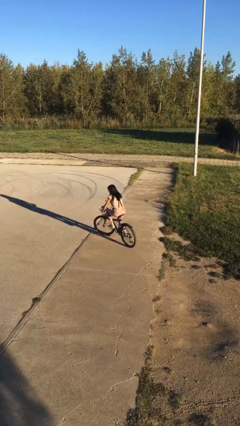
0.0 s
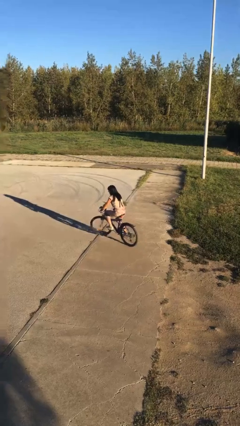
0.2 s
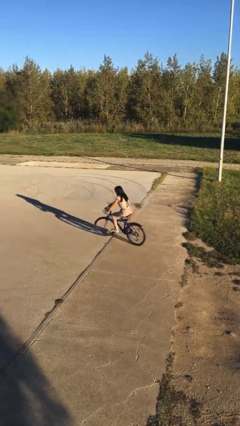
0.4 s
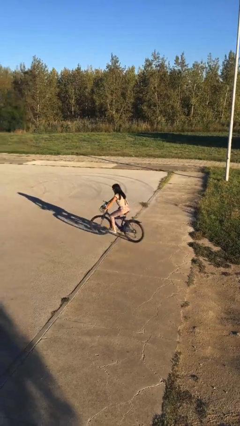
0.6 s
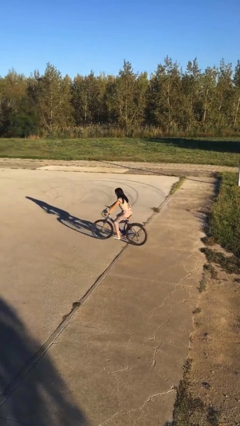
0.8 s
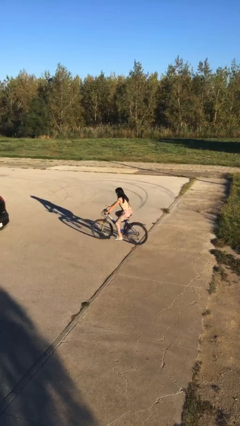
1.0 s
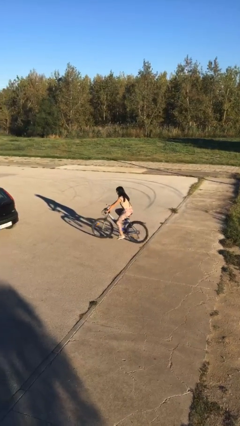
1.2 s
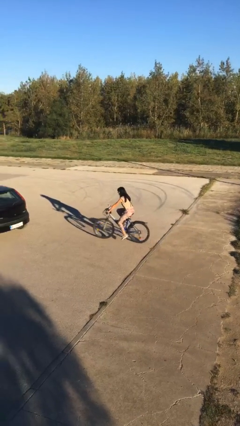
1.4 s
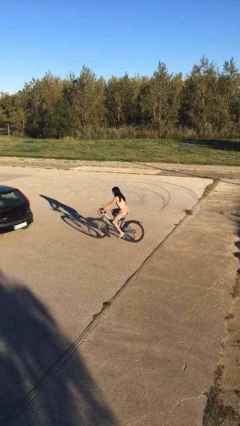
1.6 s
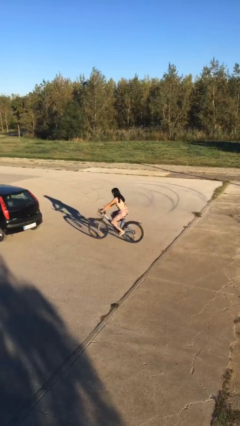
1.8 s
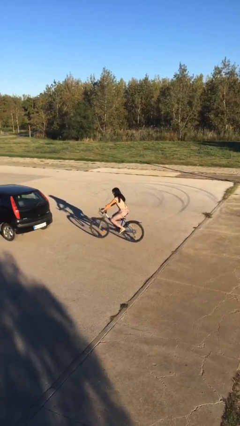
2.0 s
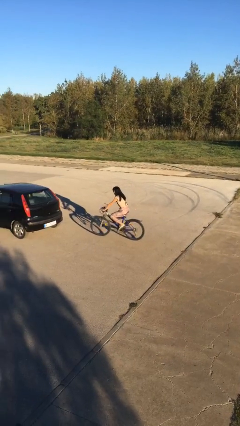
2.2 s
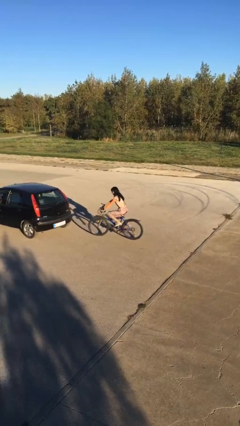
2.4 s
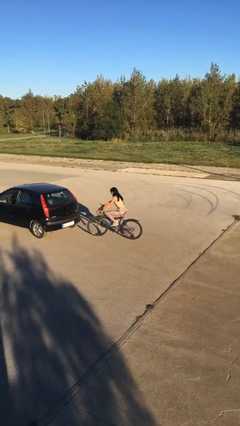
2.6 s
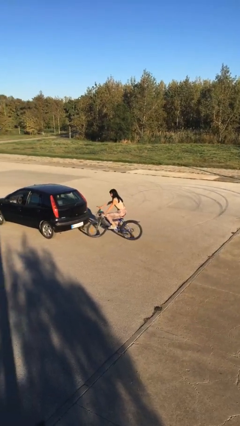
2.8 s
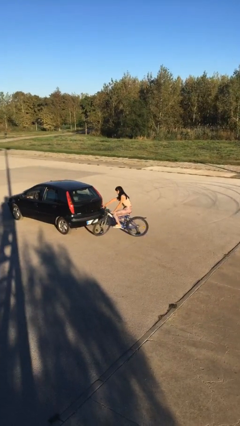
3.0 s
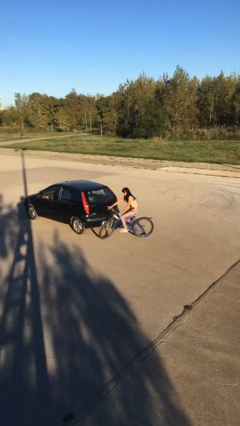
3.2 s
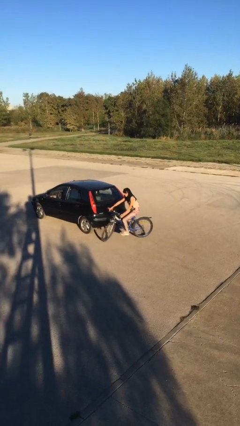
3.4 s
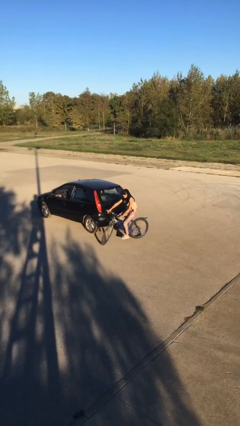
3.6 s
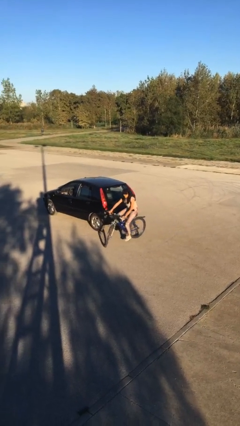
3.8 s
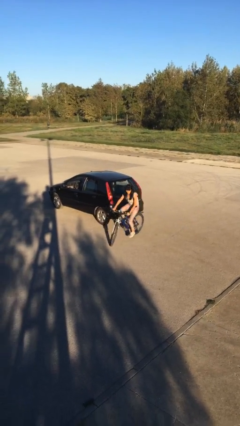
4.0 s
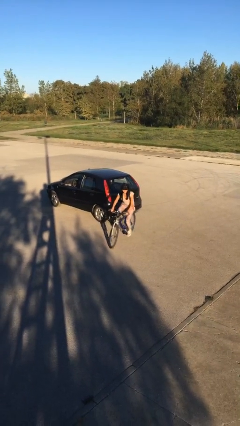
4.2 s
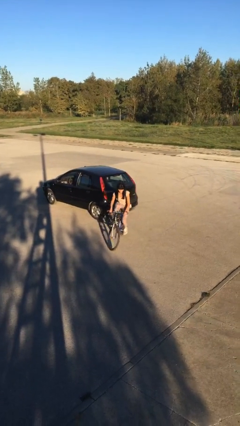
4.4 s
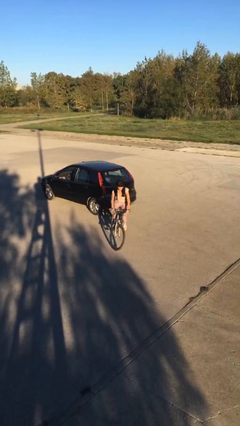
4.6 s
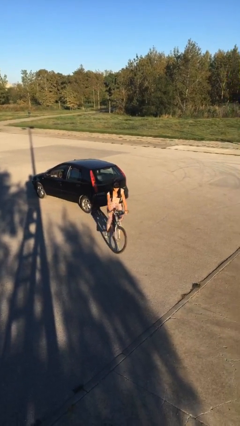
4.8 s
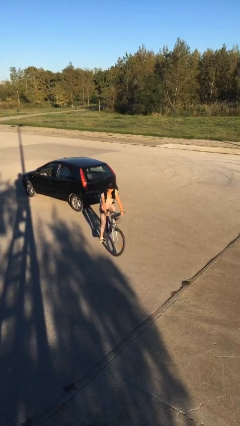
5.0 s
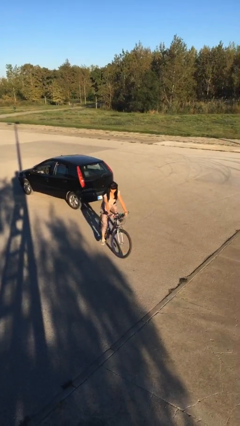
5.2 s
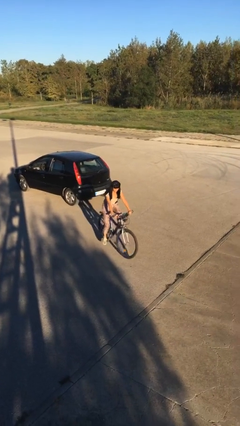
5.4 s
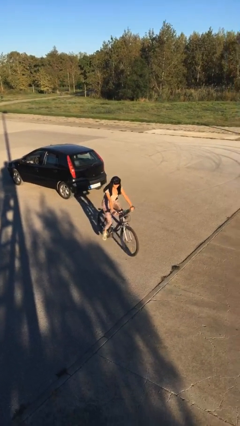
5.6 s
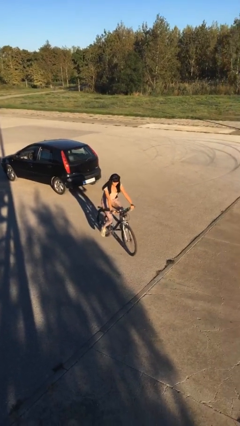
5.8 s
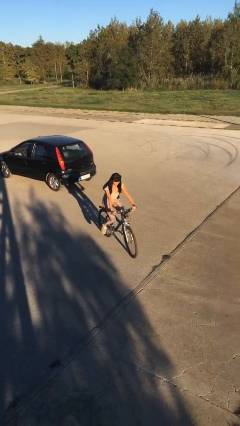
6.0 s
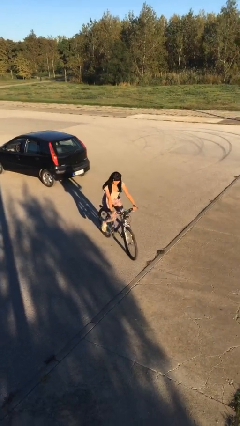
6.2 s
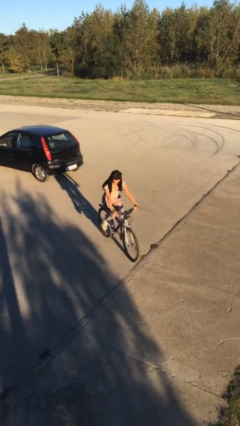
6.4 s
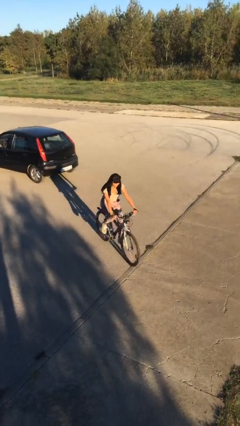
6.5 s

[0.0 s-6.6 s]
person rides bicycle

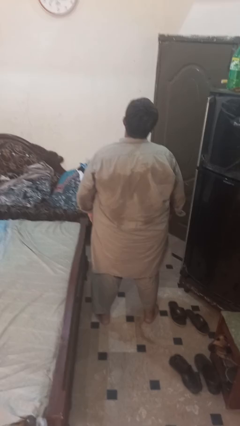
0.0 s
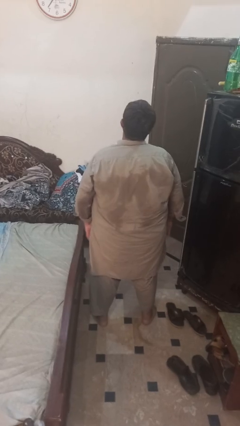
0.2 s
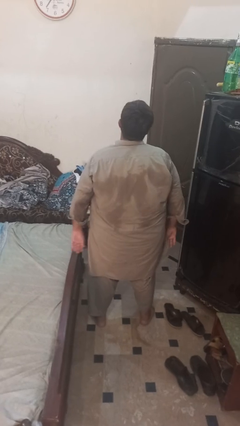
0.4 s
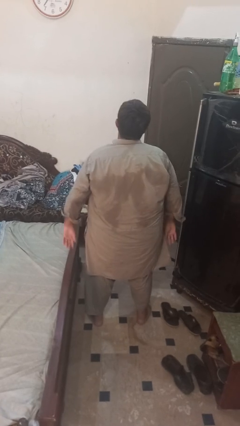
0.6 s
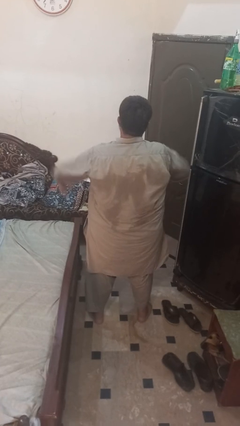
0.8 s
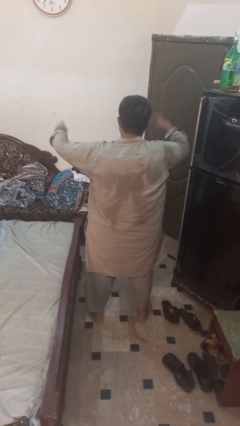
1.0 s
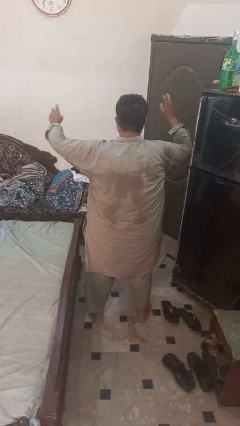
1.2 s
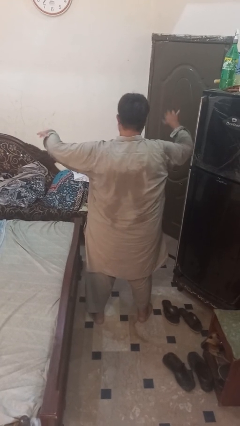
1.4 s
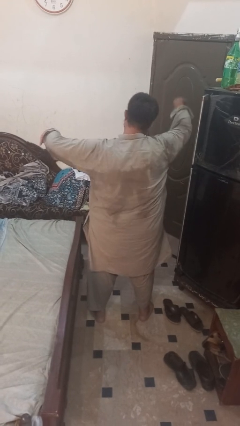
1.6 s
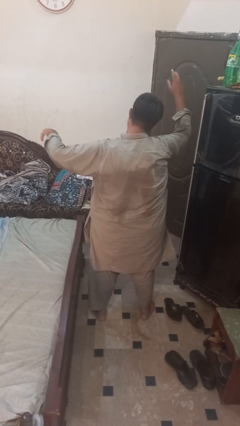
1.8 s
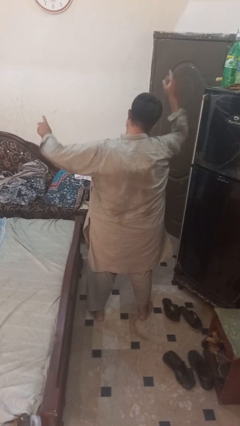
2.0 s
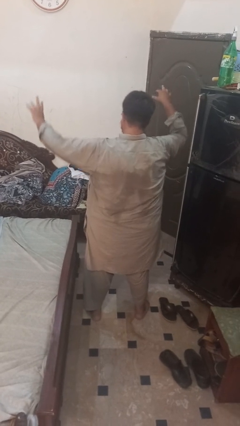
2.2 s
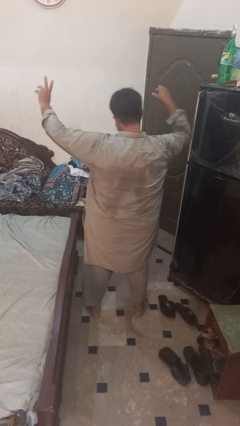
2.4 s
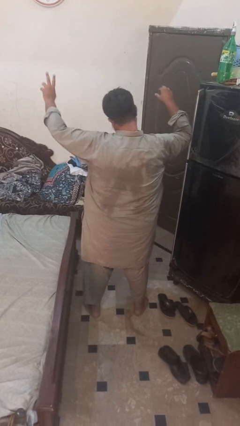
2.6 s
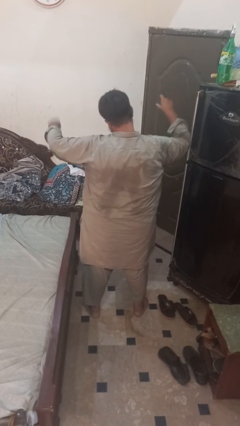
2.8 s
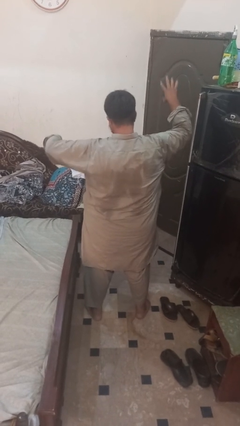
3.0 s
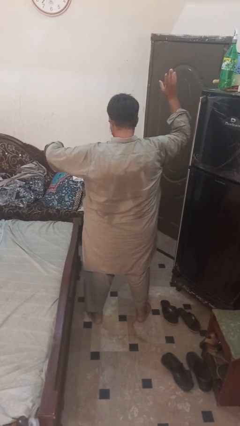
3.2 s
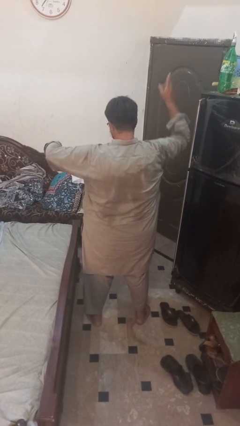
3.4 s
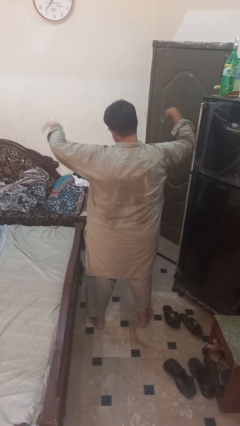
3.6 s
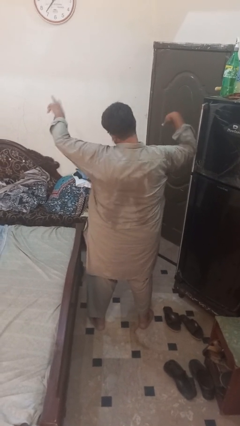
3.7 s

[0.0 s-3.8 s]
person dances in place

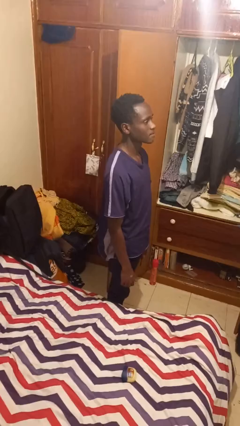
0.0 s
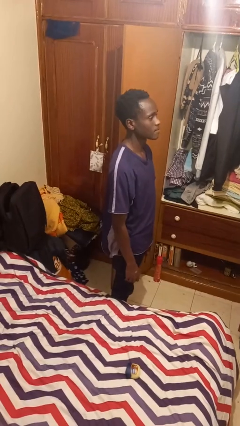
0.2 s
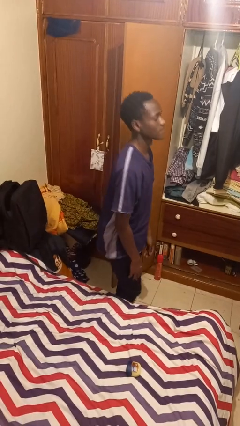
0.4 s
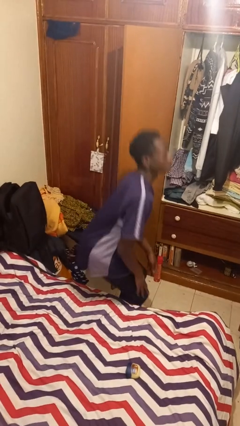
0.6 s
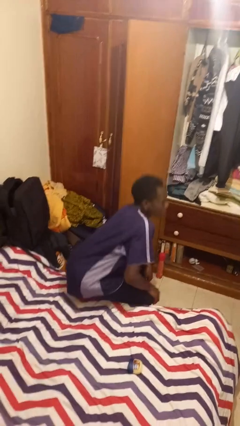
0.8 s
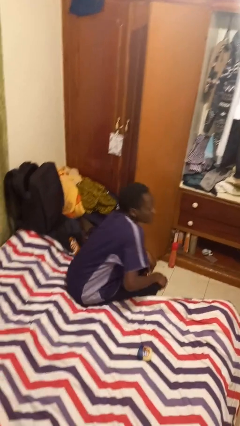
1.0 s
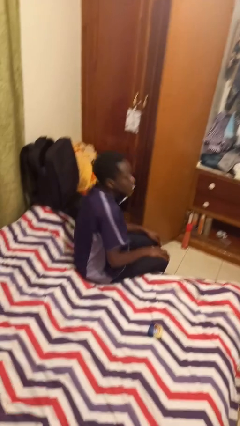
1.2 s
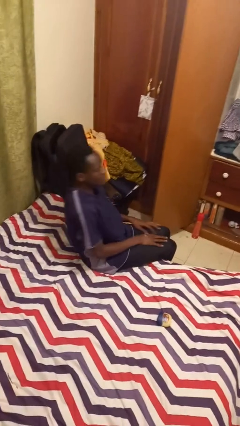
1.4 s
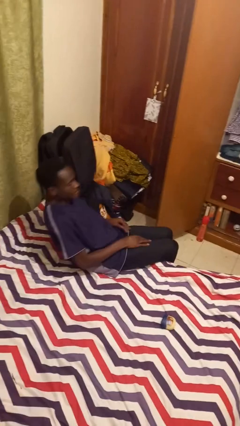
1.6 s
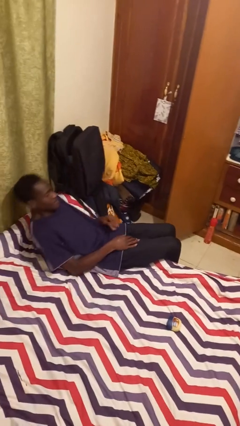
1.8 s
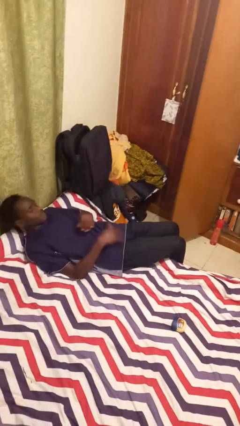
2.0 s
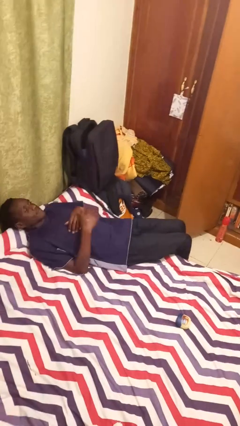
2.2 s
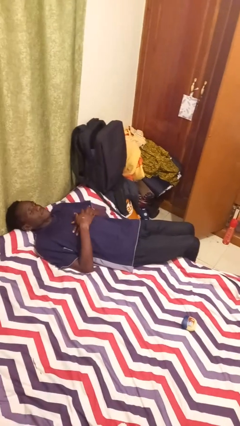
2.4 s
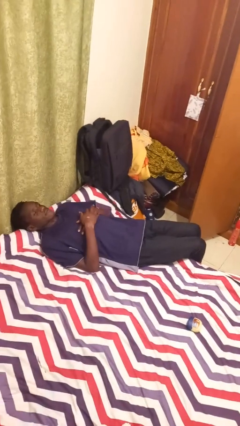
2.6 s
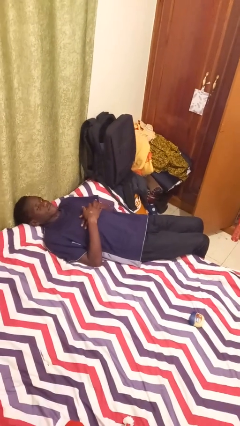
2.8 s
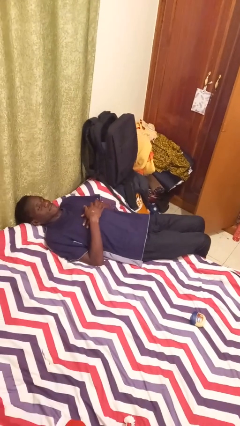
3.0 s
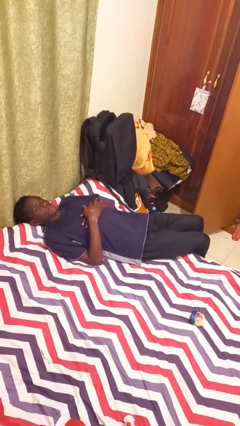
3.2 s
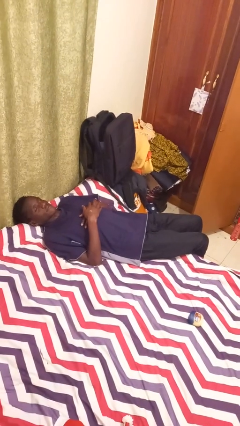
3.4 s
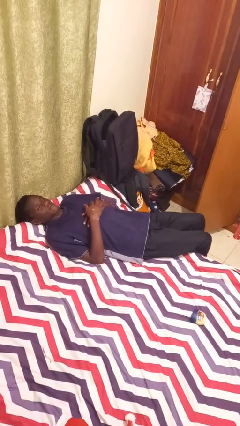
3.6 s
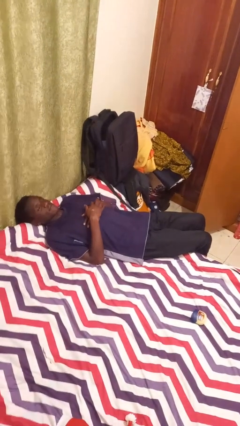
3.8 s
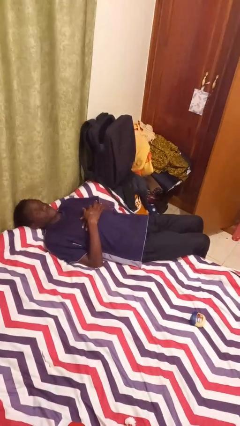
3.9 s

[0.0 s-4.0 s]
person lies down on bed

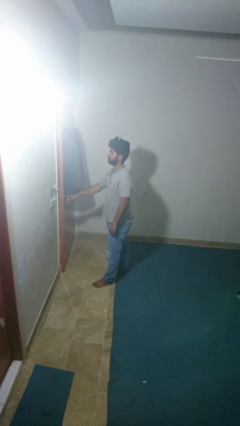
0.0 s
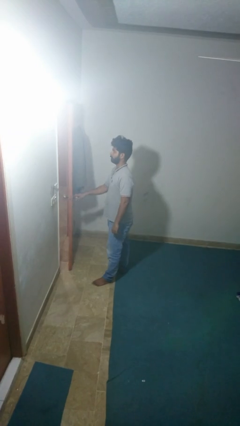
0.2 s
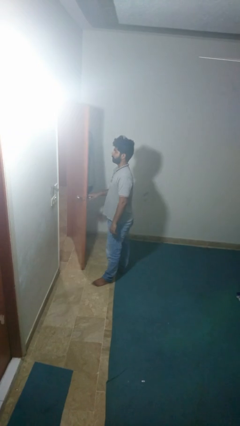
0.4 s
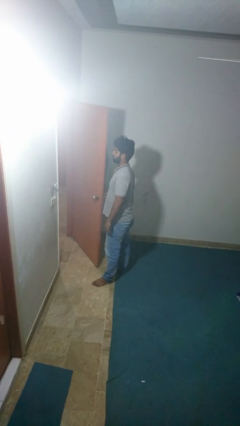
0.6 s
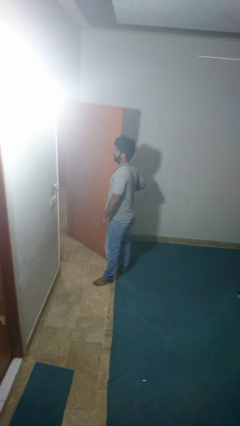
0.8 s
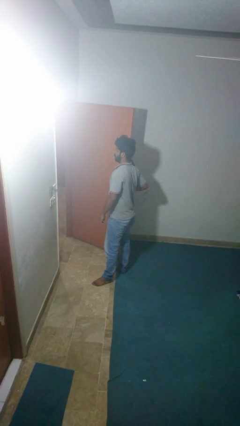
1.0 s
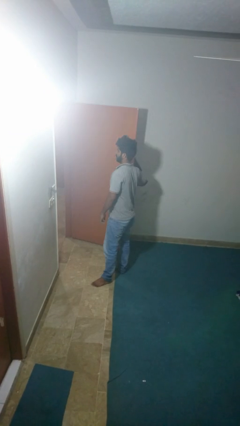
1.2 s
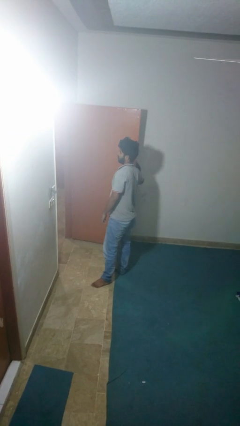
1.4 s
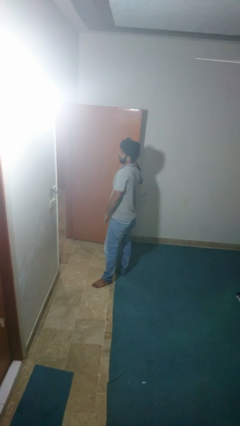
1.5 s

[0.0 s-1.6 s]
person opens facility door

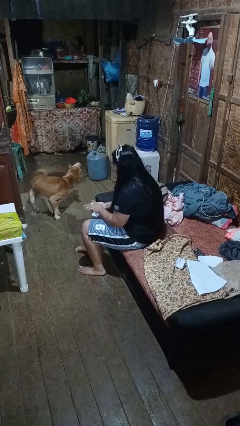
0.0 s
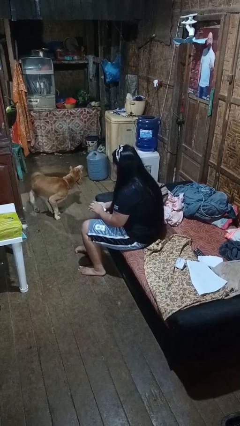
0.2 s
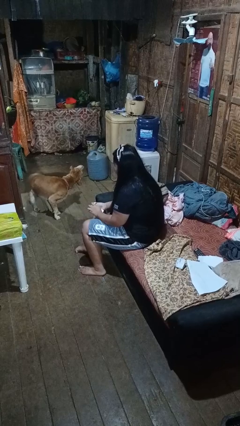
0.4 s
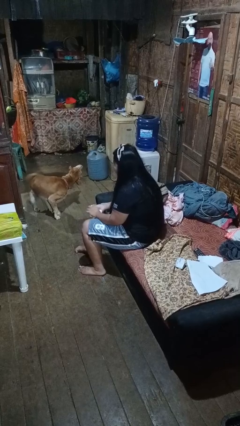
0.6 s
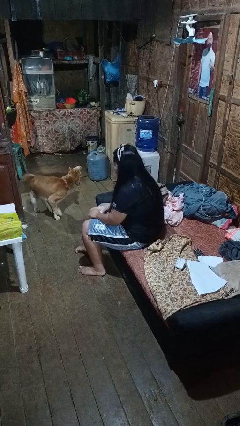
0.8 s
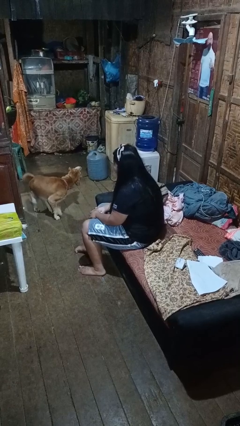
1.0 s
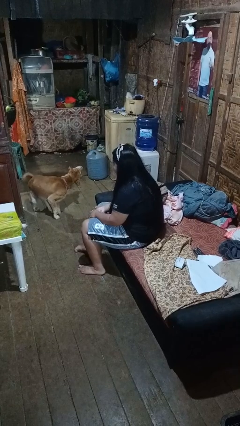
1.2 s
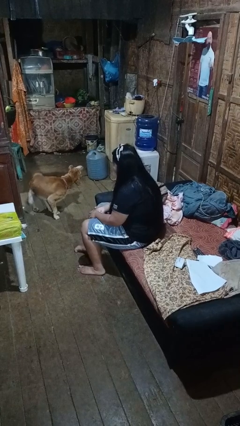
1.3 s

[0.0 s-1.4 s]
person crumples paper
